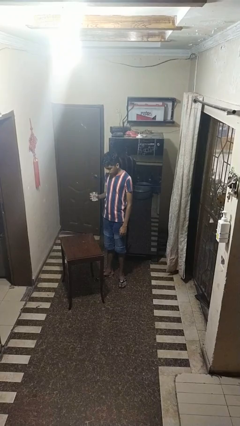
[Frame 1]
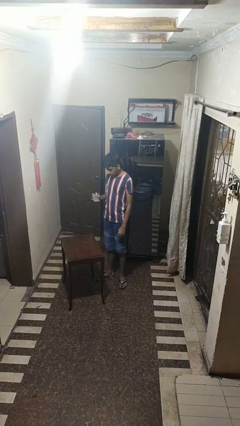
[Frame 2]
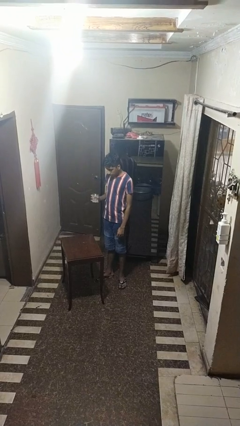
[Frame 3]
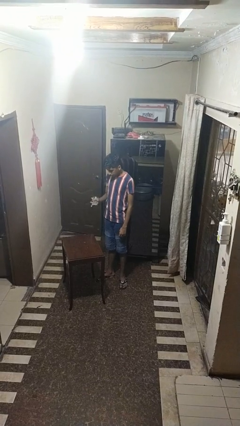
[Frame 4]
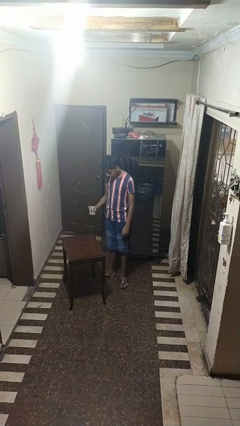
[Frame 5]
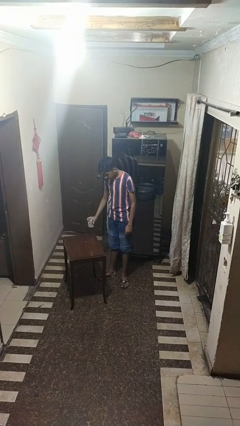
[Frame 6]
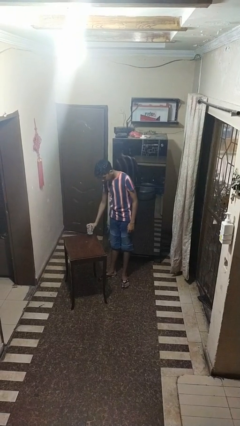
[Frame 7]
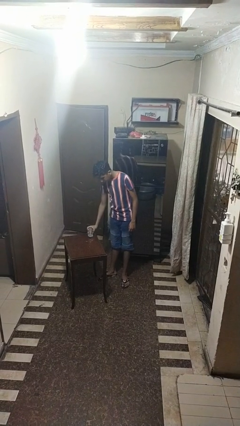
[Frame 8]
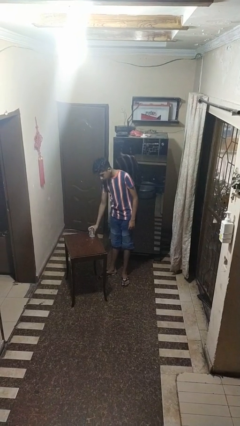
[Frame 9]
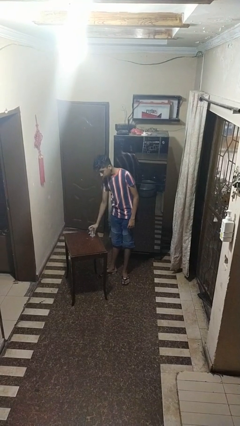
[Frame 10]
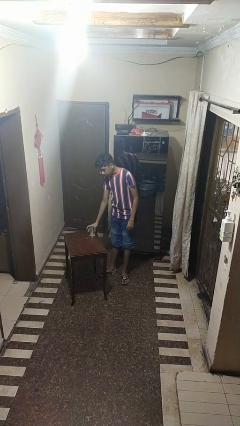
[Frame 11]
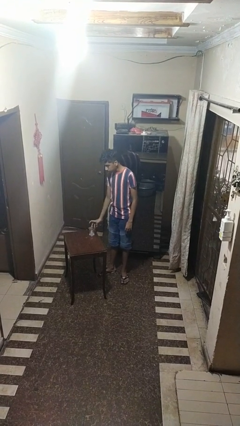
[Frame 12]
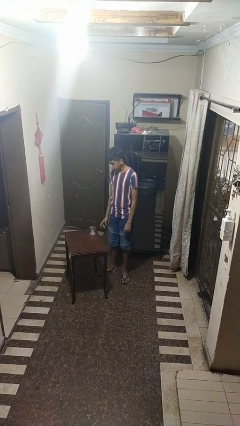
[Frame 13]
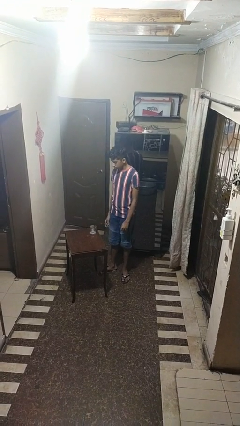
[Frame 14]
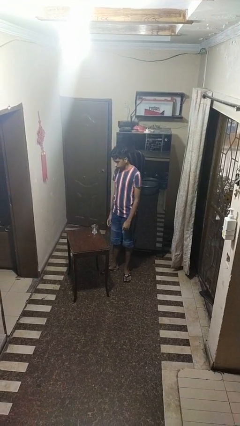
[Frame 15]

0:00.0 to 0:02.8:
person puts down object on table

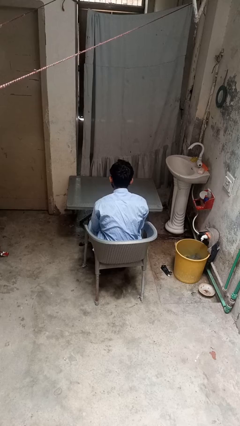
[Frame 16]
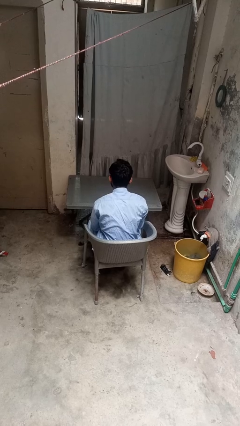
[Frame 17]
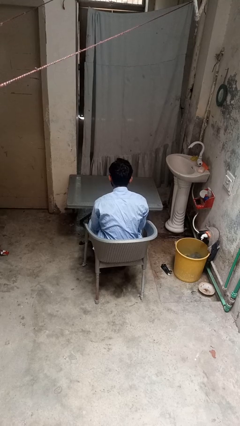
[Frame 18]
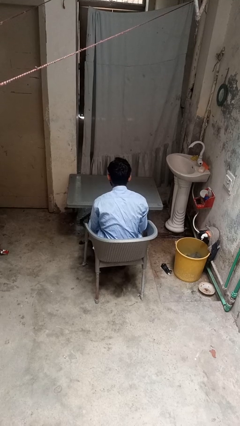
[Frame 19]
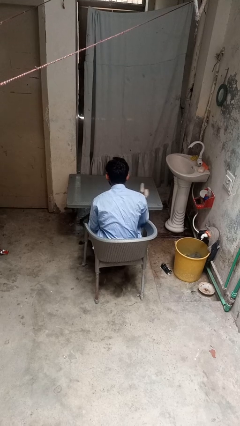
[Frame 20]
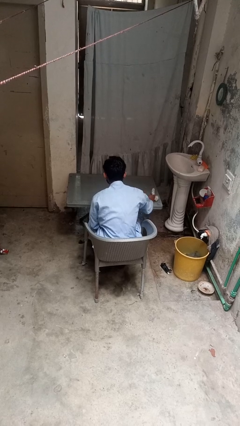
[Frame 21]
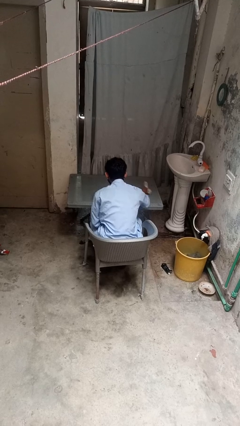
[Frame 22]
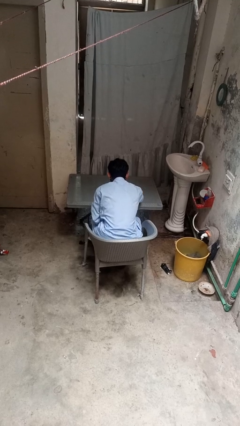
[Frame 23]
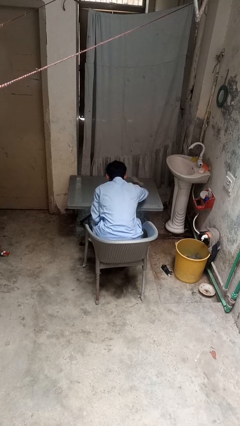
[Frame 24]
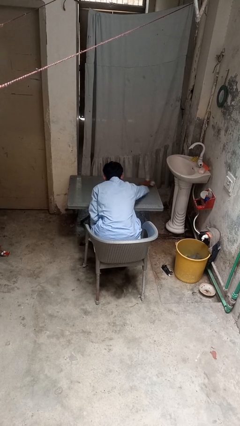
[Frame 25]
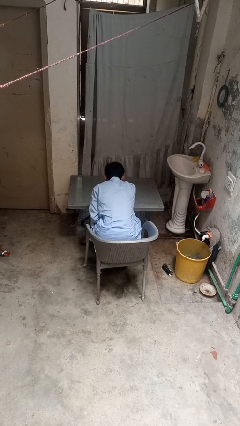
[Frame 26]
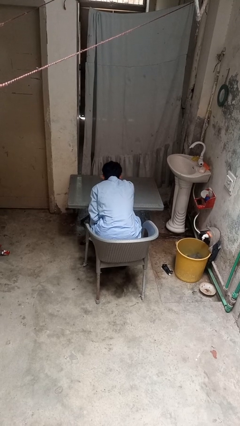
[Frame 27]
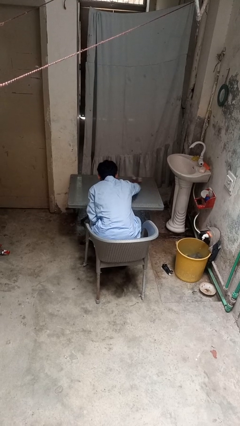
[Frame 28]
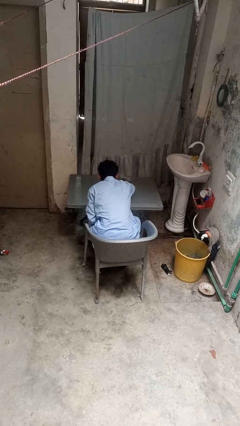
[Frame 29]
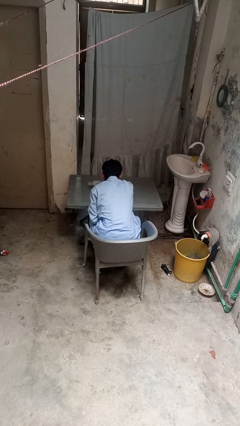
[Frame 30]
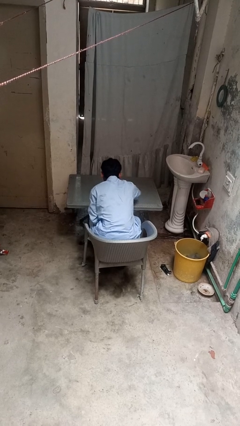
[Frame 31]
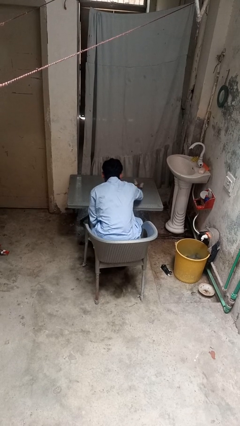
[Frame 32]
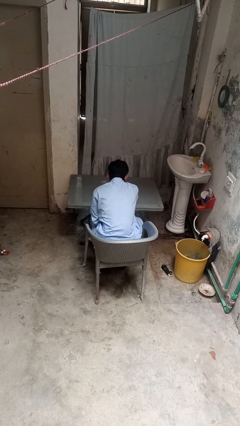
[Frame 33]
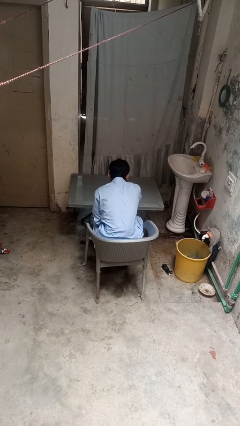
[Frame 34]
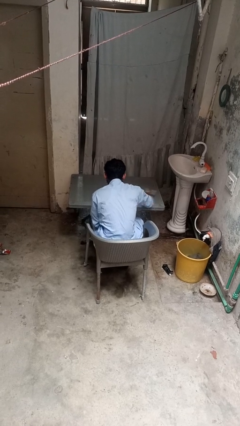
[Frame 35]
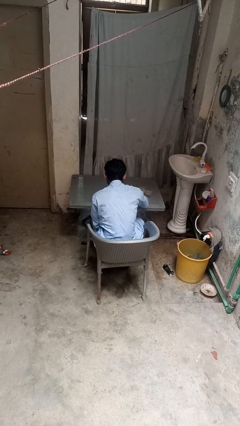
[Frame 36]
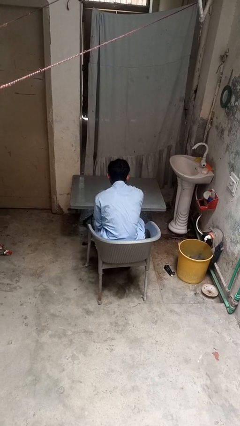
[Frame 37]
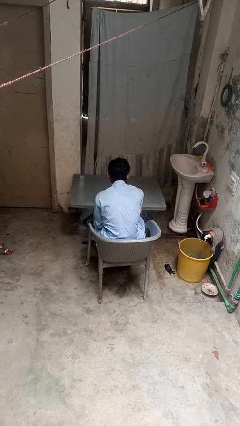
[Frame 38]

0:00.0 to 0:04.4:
person cleans table with rag

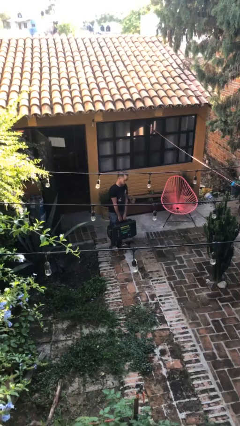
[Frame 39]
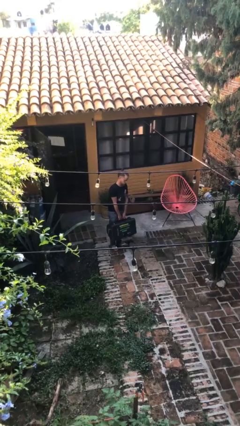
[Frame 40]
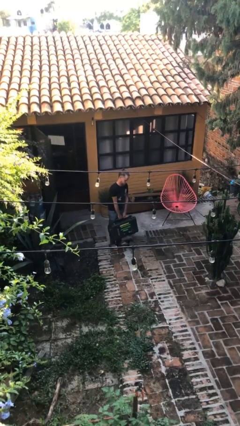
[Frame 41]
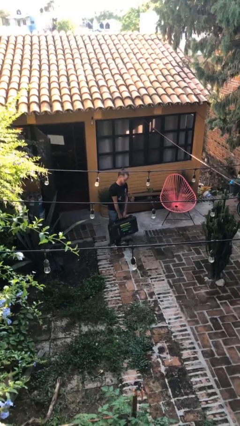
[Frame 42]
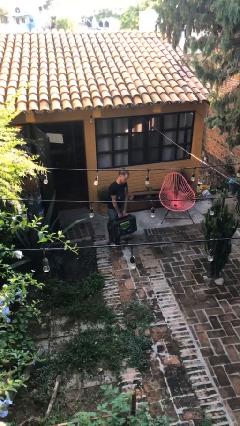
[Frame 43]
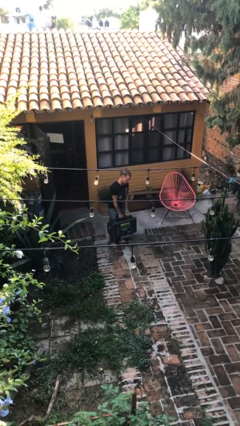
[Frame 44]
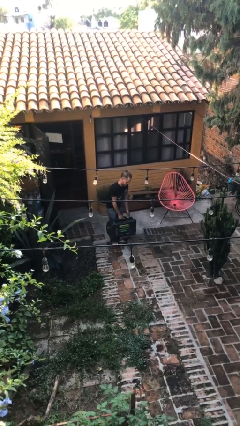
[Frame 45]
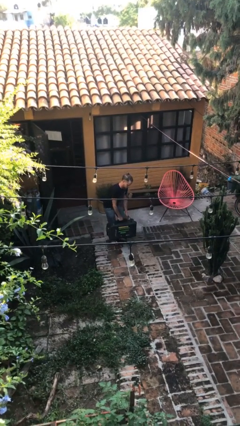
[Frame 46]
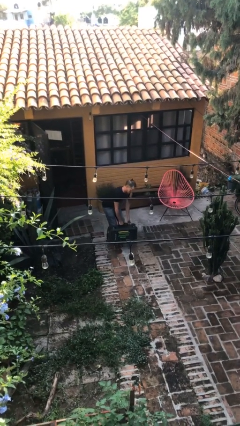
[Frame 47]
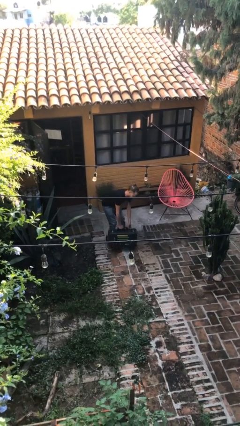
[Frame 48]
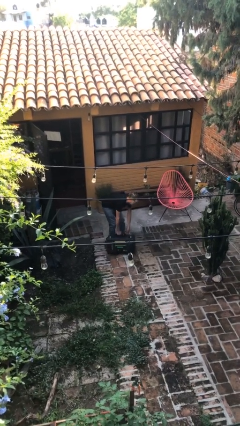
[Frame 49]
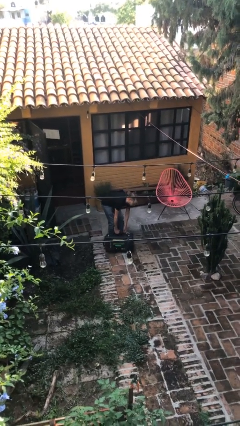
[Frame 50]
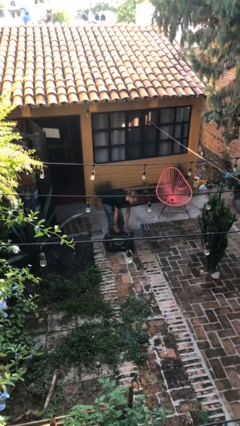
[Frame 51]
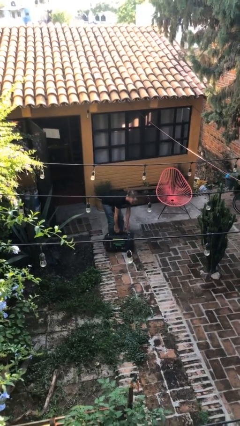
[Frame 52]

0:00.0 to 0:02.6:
person puts down object on floor

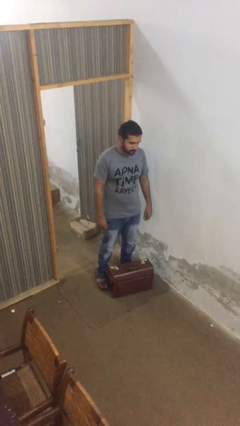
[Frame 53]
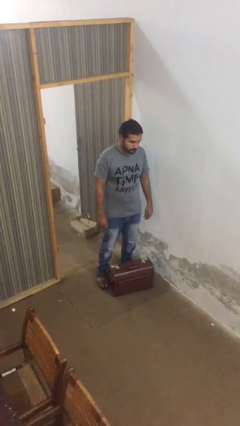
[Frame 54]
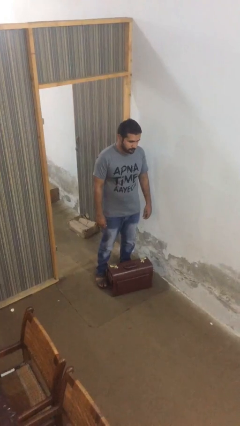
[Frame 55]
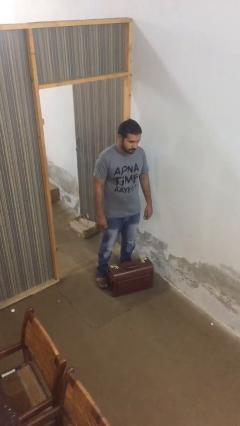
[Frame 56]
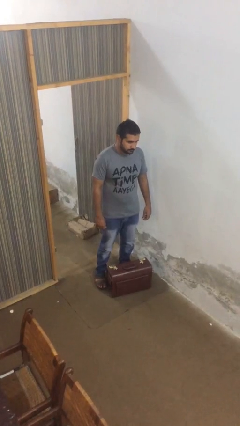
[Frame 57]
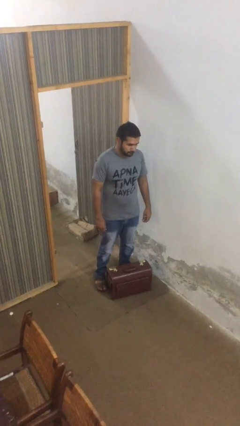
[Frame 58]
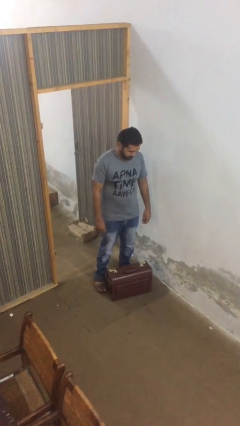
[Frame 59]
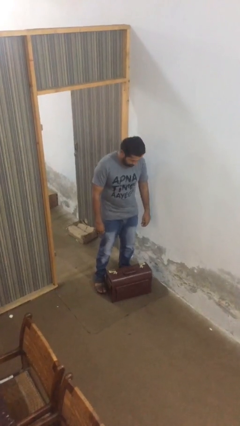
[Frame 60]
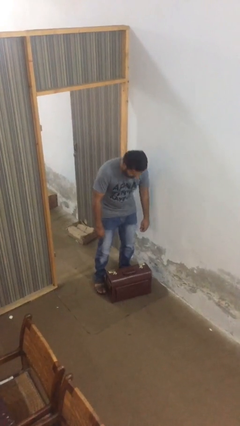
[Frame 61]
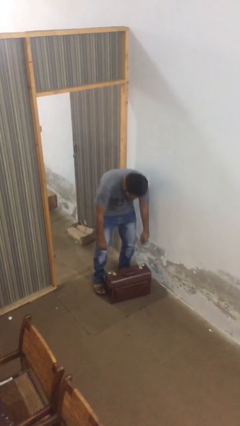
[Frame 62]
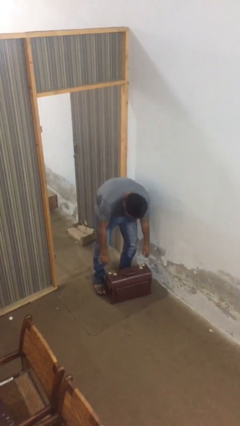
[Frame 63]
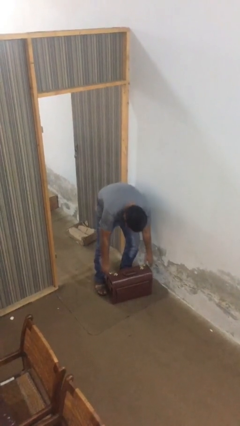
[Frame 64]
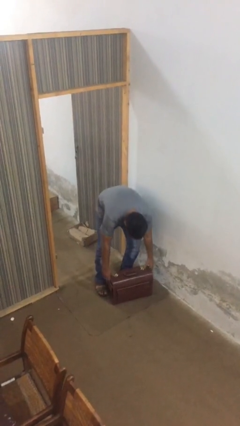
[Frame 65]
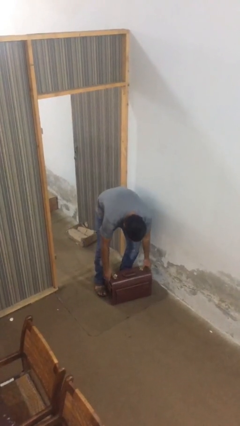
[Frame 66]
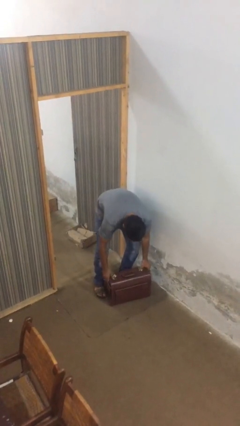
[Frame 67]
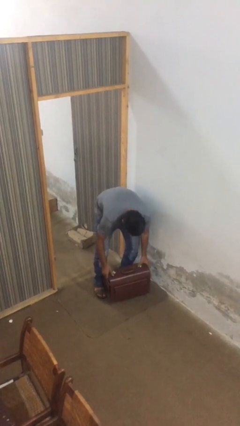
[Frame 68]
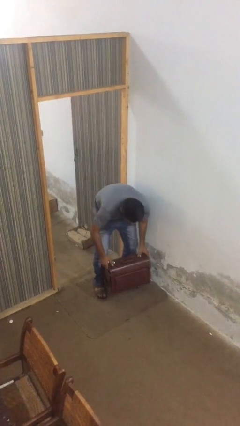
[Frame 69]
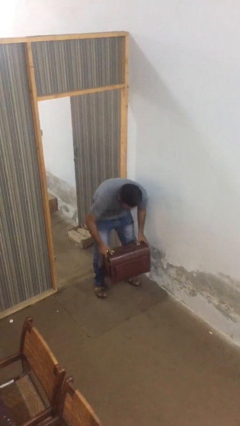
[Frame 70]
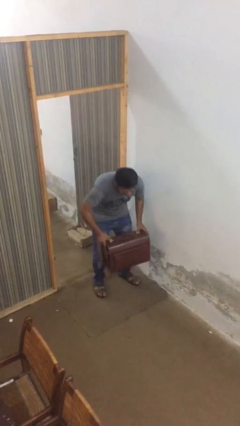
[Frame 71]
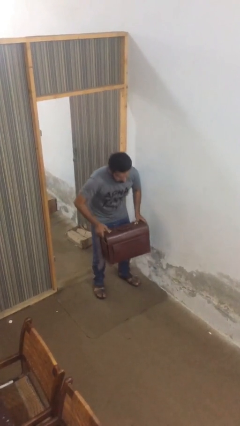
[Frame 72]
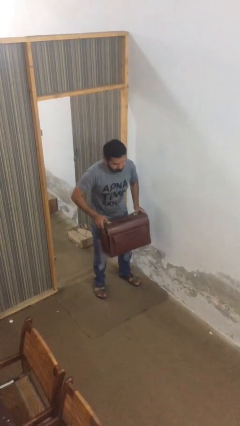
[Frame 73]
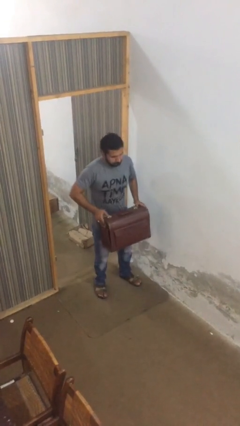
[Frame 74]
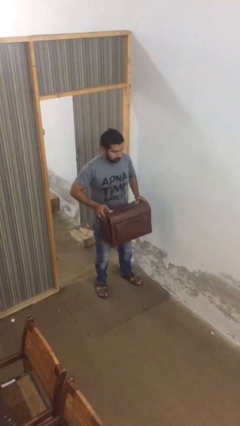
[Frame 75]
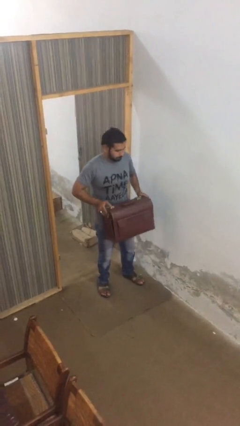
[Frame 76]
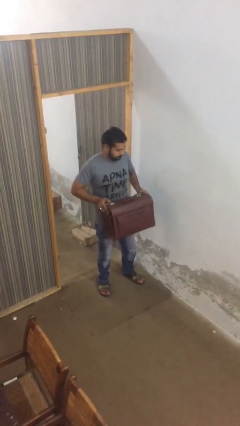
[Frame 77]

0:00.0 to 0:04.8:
person picks up object from floor

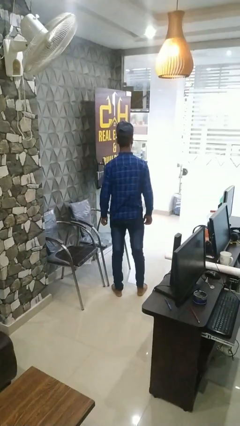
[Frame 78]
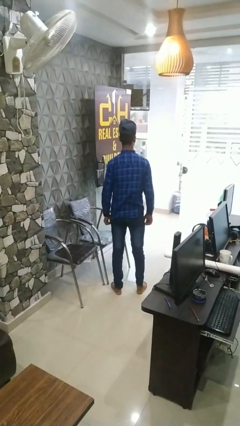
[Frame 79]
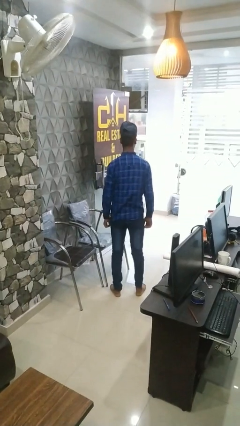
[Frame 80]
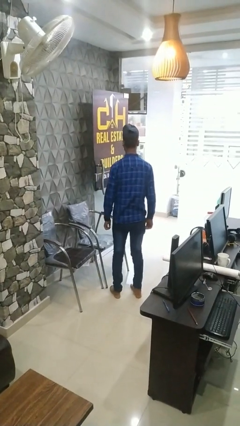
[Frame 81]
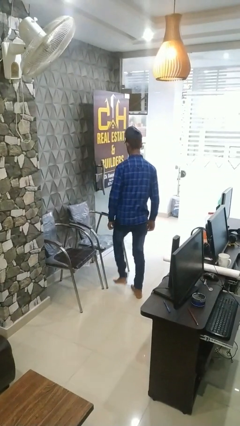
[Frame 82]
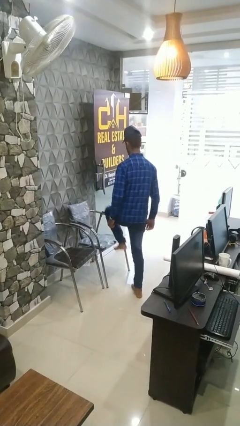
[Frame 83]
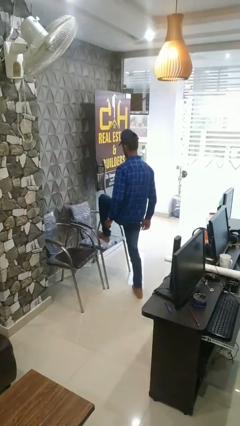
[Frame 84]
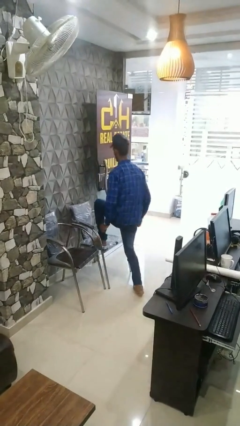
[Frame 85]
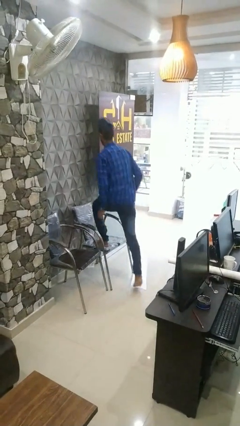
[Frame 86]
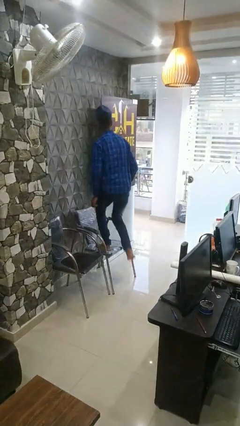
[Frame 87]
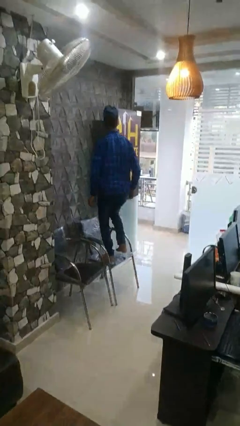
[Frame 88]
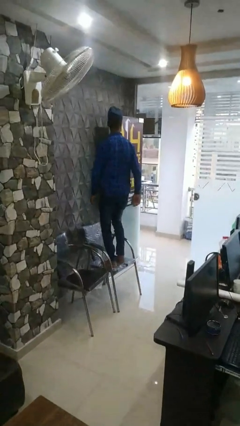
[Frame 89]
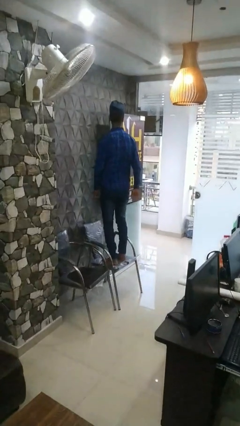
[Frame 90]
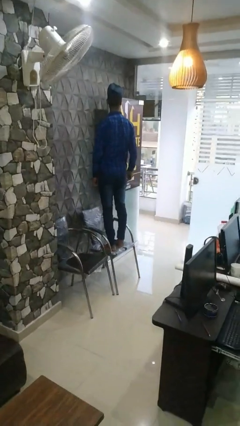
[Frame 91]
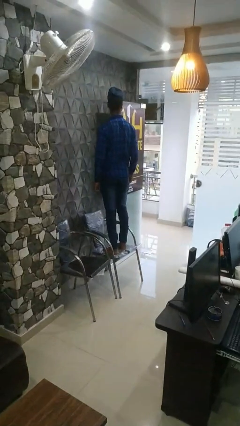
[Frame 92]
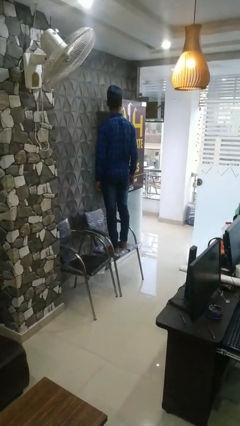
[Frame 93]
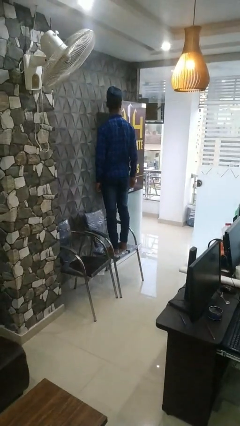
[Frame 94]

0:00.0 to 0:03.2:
person climbs on chair
